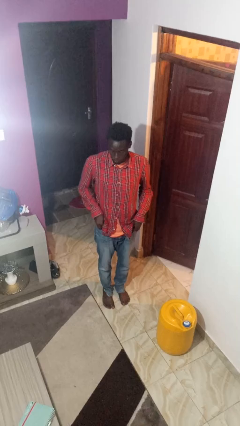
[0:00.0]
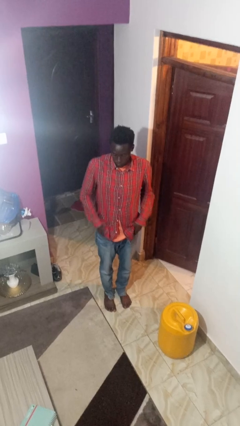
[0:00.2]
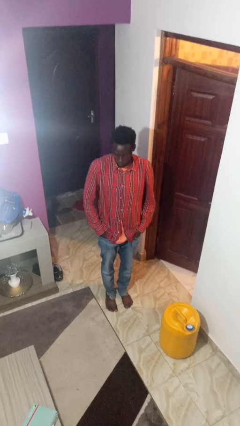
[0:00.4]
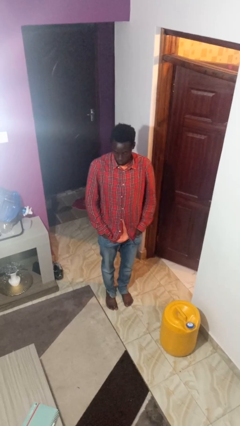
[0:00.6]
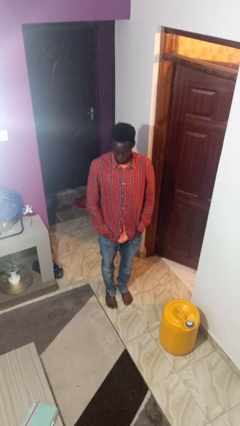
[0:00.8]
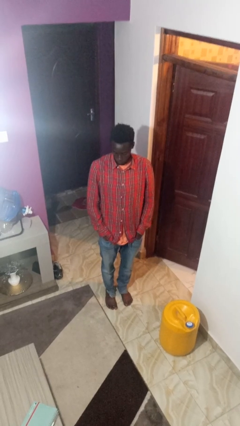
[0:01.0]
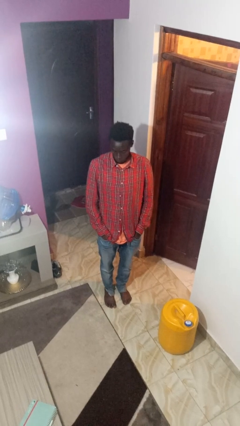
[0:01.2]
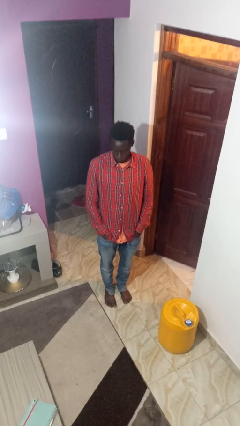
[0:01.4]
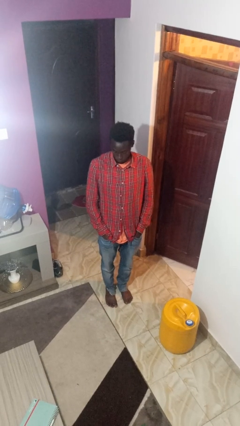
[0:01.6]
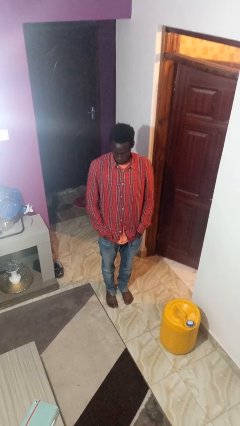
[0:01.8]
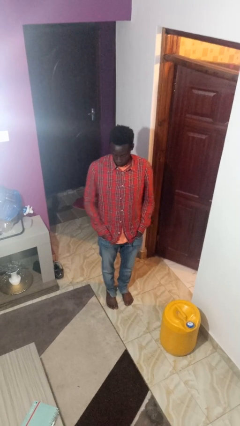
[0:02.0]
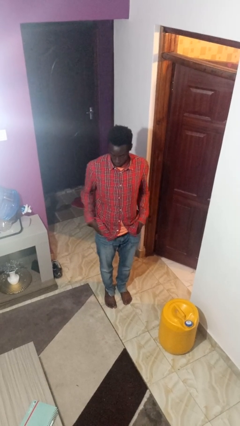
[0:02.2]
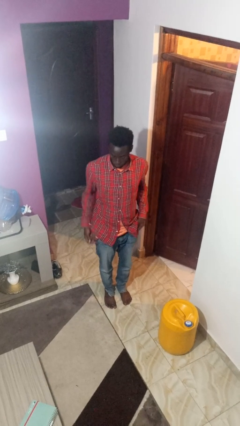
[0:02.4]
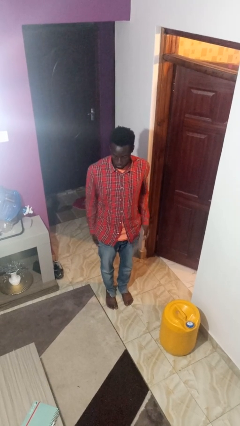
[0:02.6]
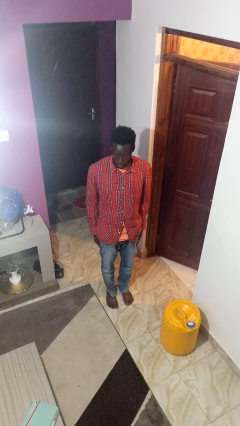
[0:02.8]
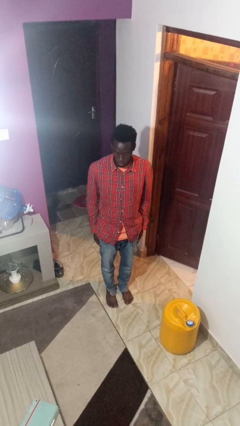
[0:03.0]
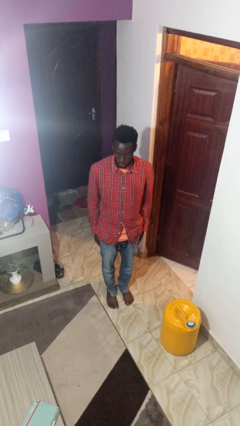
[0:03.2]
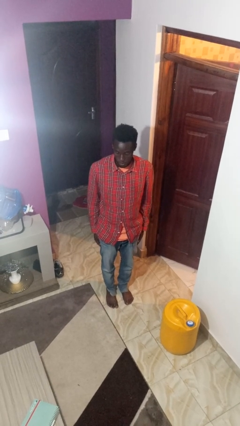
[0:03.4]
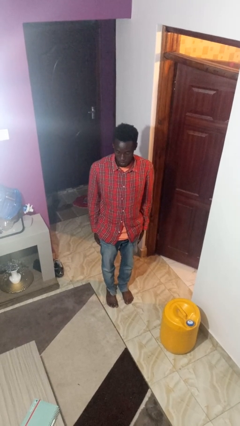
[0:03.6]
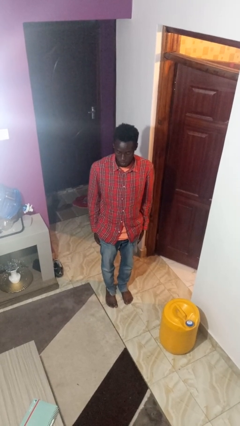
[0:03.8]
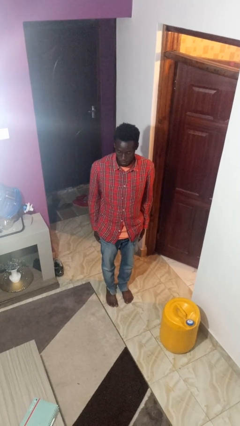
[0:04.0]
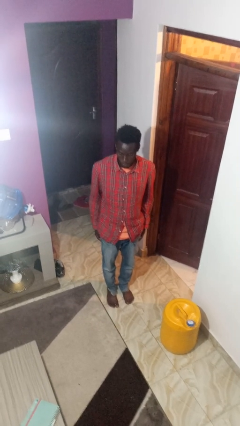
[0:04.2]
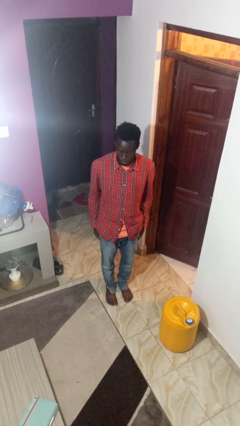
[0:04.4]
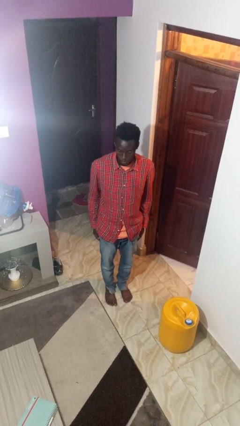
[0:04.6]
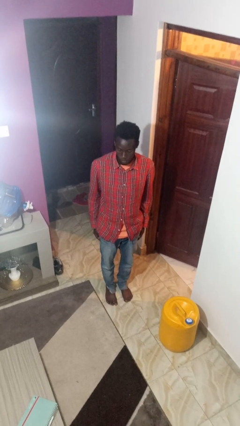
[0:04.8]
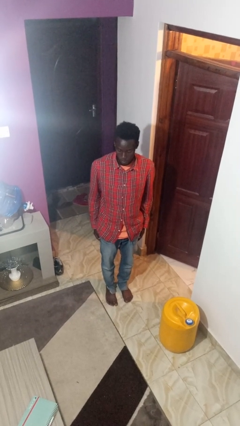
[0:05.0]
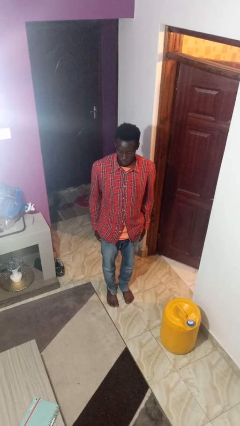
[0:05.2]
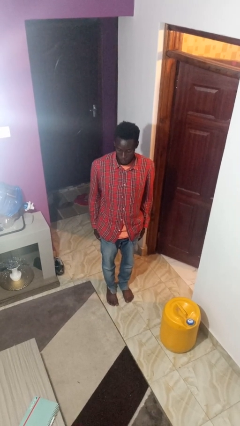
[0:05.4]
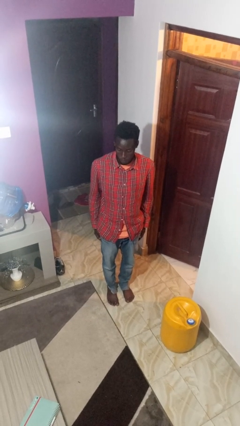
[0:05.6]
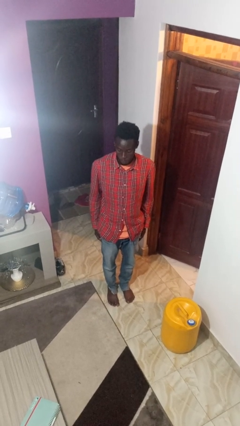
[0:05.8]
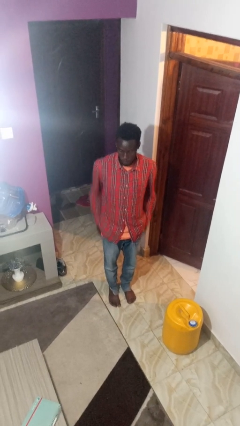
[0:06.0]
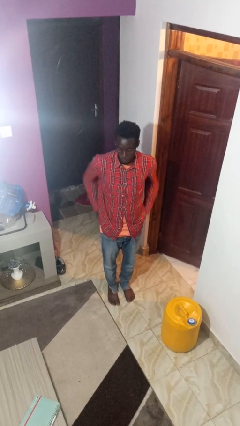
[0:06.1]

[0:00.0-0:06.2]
person puts hands in back pockets

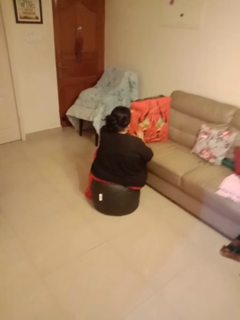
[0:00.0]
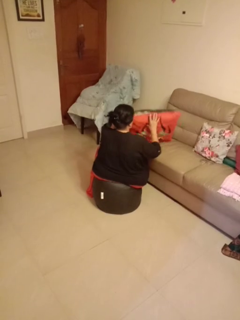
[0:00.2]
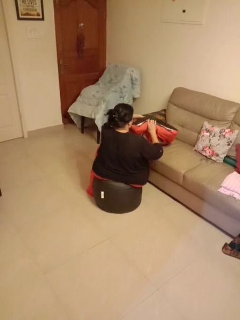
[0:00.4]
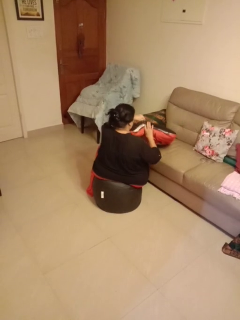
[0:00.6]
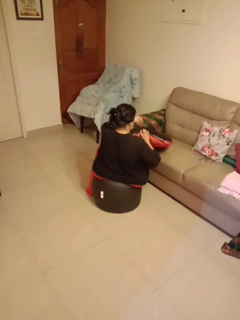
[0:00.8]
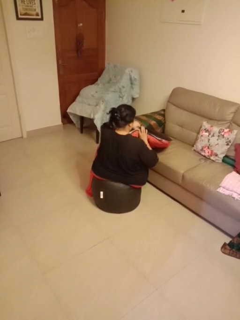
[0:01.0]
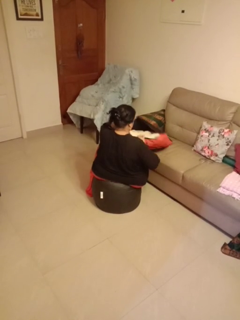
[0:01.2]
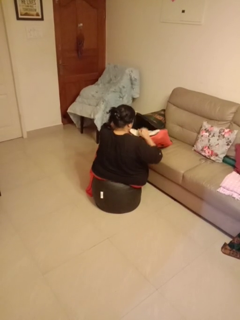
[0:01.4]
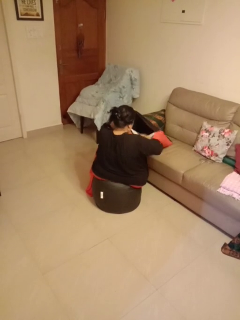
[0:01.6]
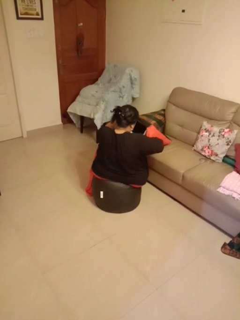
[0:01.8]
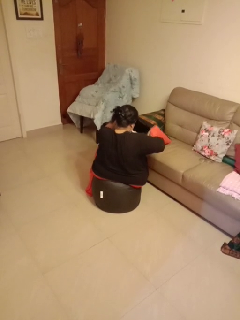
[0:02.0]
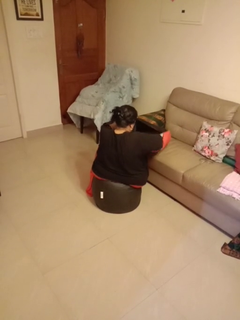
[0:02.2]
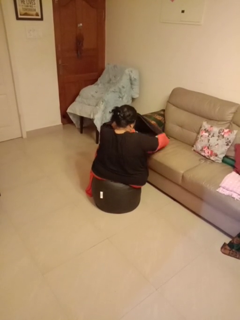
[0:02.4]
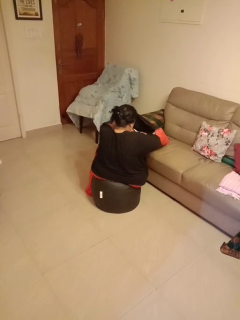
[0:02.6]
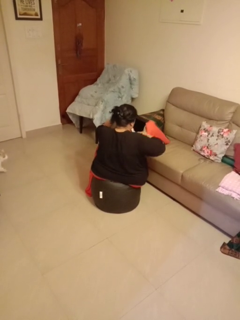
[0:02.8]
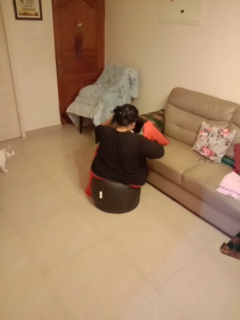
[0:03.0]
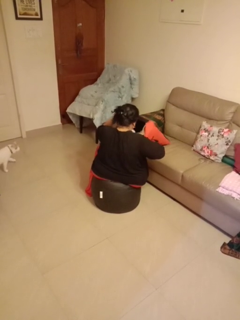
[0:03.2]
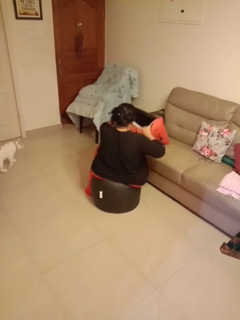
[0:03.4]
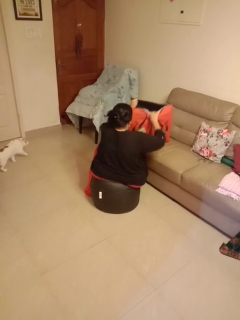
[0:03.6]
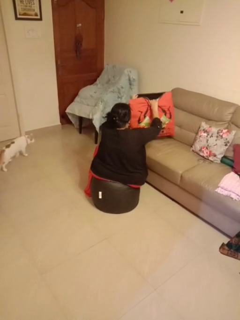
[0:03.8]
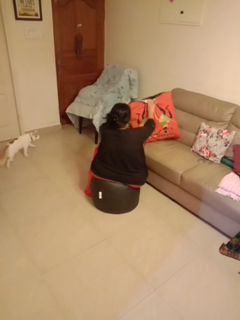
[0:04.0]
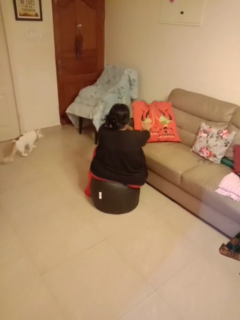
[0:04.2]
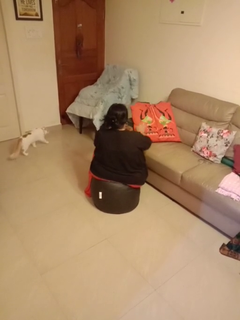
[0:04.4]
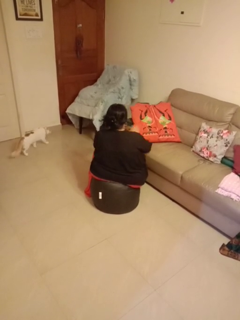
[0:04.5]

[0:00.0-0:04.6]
person searches in couch

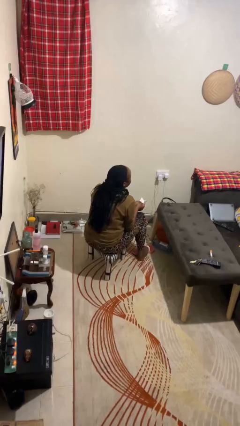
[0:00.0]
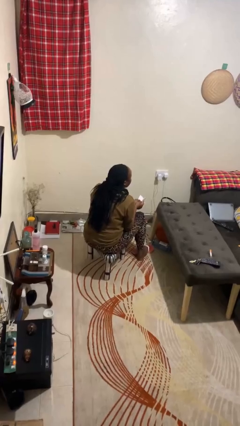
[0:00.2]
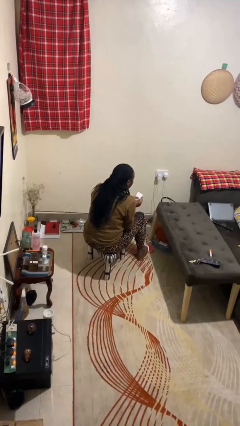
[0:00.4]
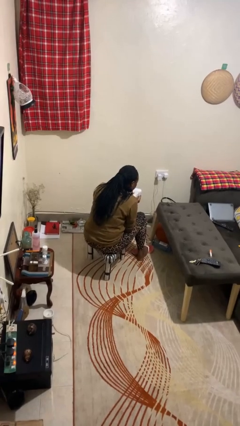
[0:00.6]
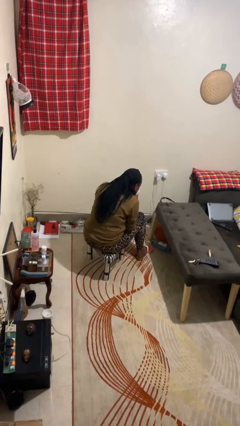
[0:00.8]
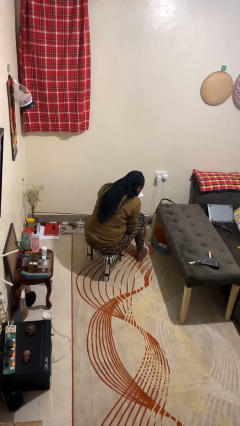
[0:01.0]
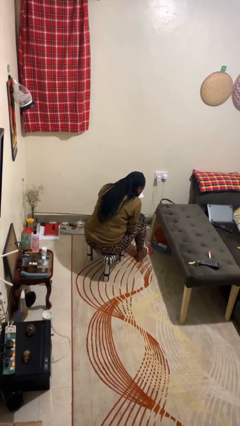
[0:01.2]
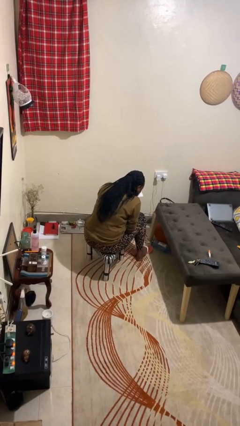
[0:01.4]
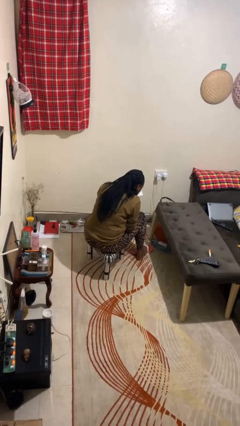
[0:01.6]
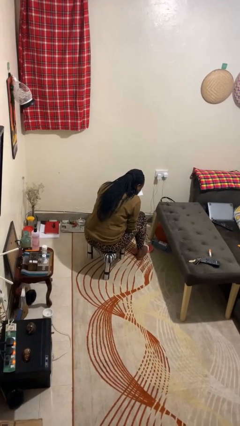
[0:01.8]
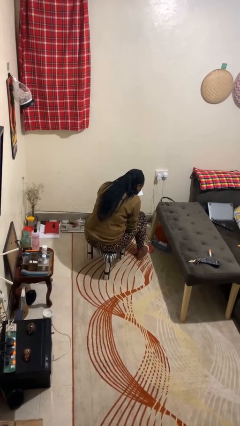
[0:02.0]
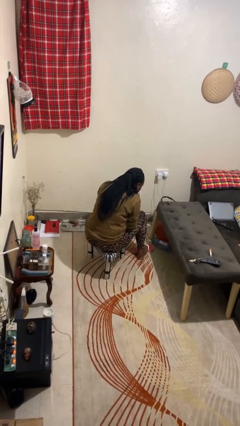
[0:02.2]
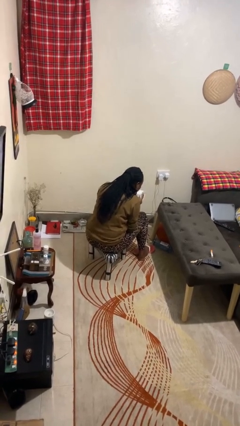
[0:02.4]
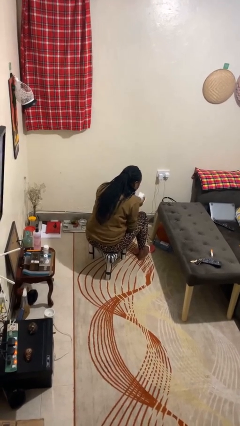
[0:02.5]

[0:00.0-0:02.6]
person blows nose

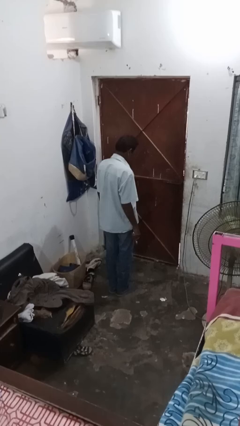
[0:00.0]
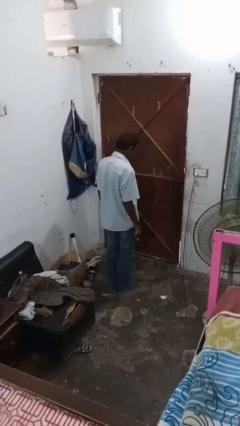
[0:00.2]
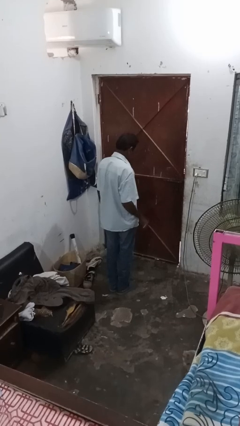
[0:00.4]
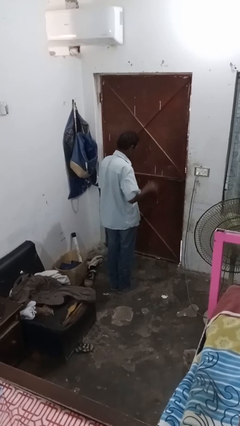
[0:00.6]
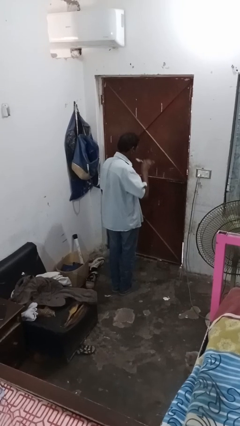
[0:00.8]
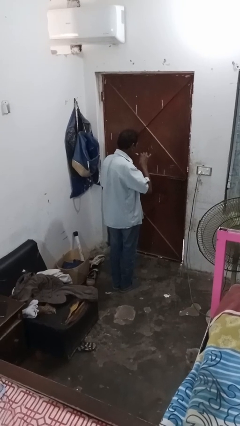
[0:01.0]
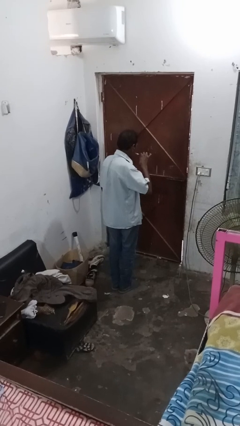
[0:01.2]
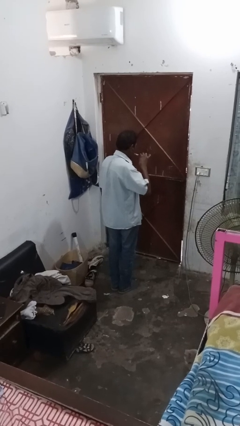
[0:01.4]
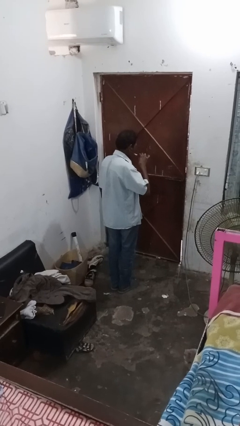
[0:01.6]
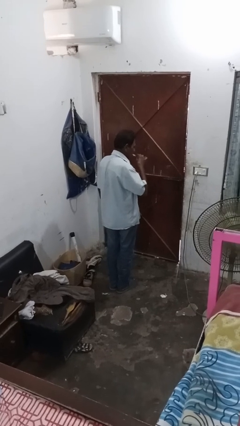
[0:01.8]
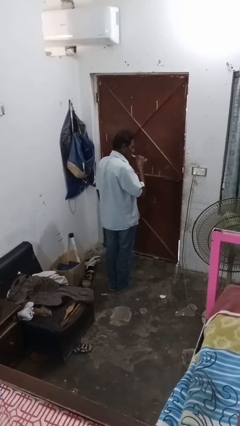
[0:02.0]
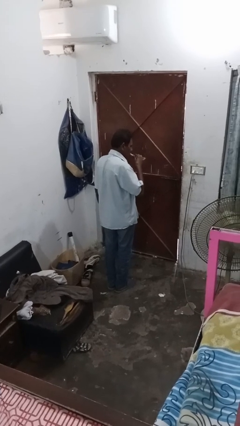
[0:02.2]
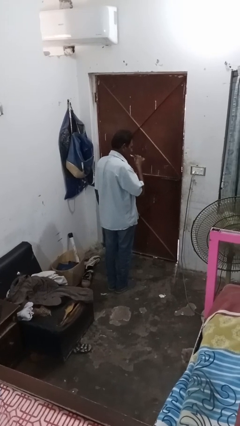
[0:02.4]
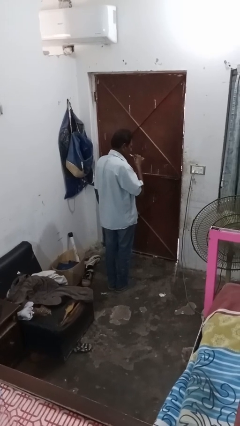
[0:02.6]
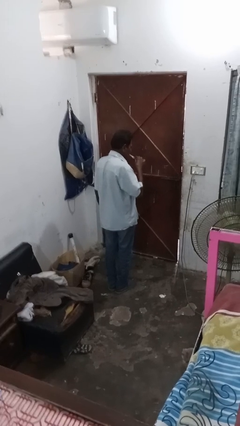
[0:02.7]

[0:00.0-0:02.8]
person brushes teeth

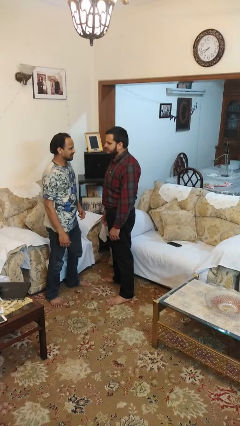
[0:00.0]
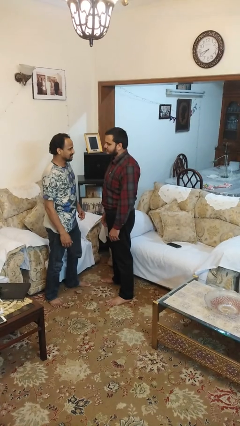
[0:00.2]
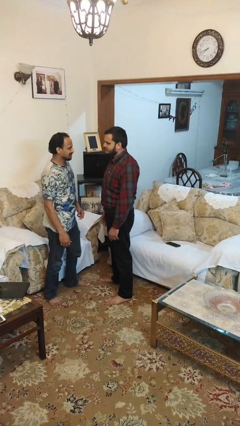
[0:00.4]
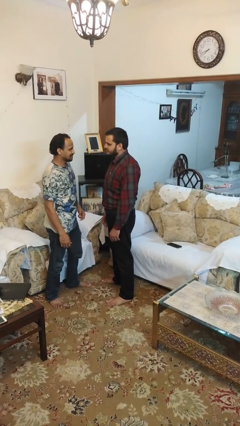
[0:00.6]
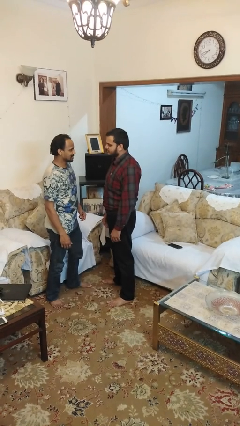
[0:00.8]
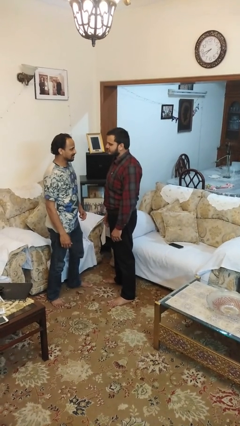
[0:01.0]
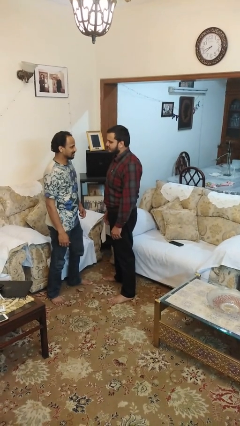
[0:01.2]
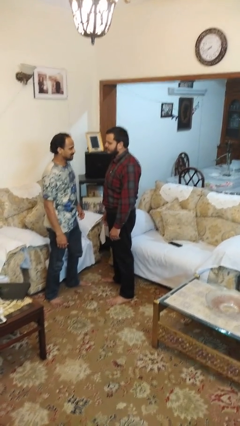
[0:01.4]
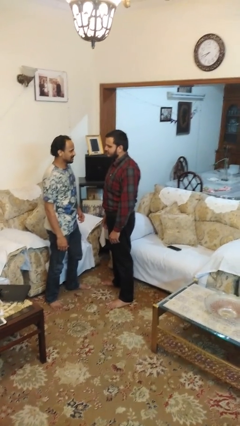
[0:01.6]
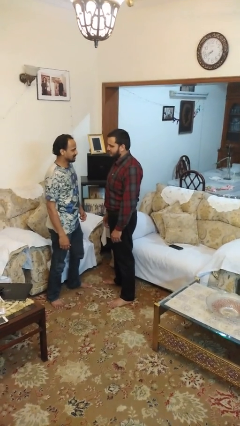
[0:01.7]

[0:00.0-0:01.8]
person highfives hand

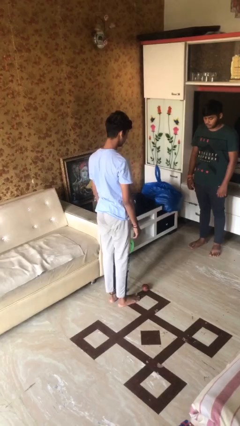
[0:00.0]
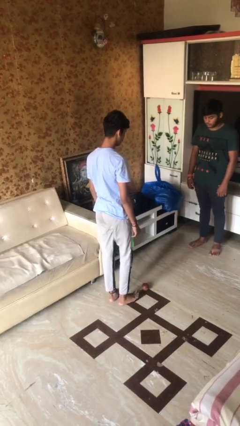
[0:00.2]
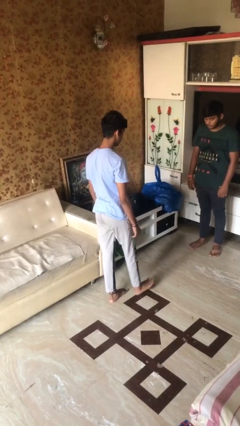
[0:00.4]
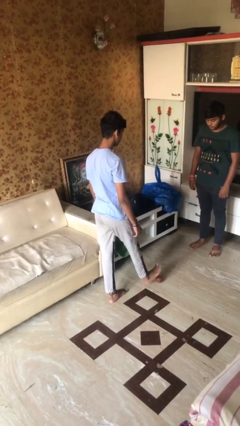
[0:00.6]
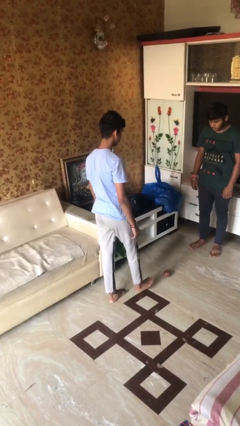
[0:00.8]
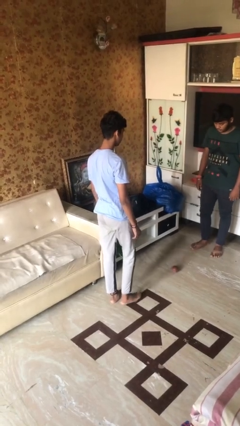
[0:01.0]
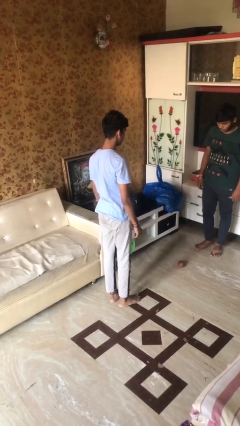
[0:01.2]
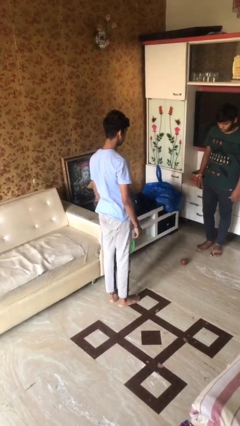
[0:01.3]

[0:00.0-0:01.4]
person kicks object to person
